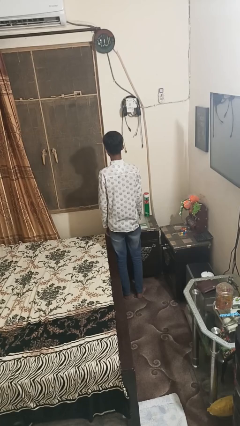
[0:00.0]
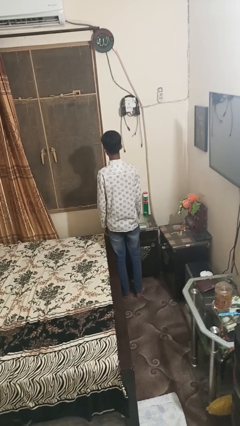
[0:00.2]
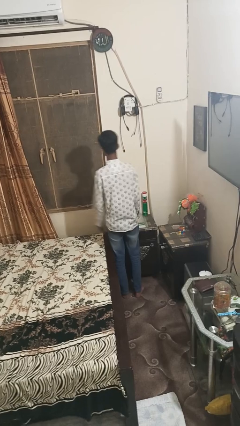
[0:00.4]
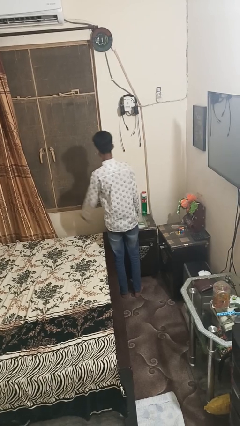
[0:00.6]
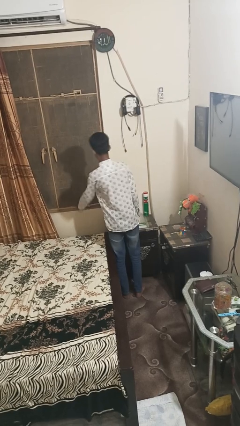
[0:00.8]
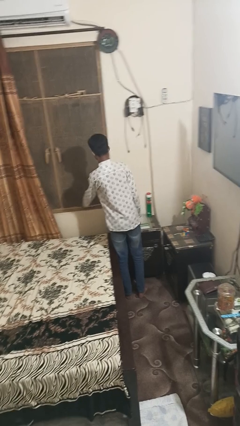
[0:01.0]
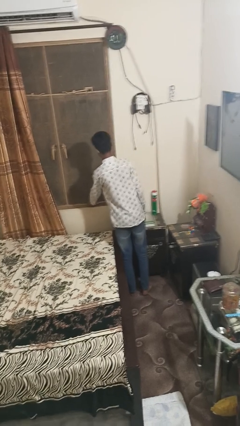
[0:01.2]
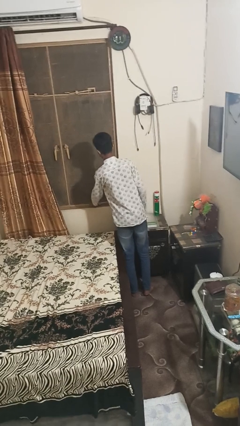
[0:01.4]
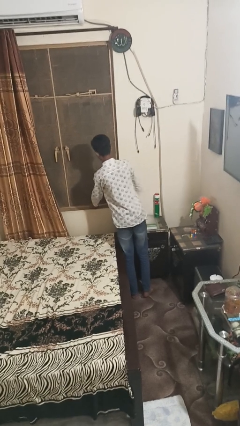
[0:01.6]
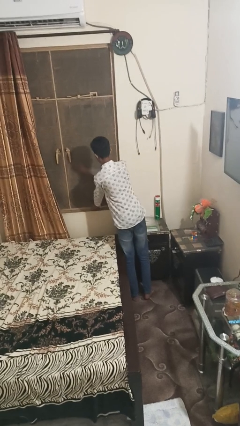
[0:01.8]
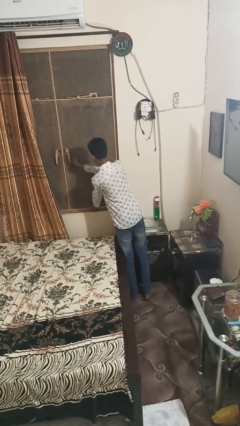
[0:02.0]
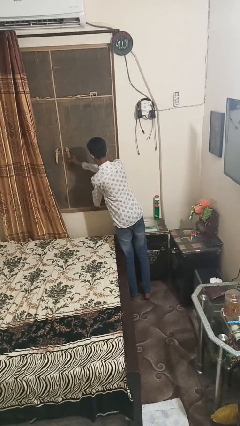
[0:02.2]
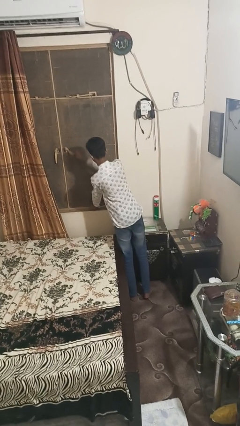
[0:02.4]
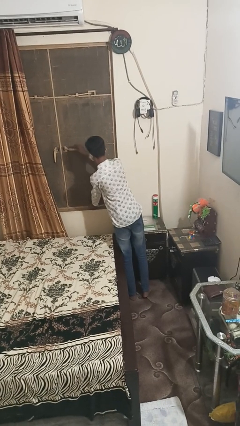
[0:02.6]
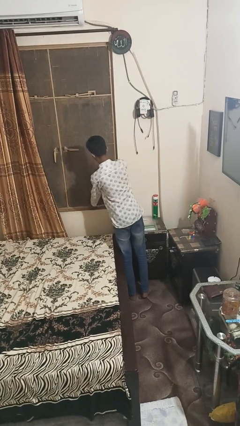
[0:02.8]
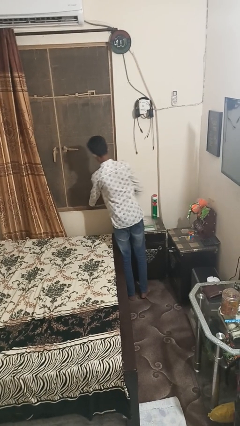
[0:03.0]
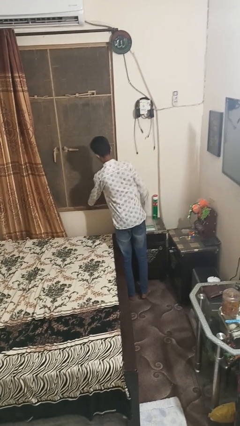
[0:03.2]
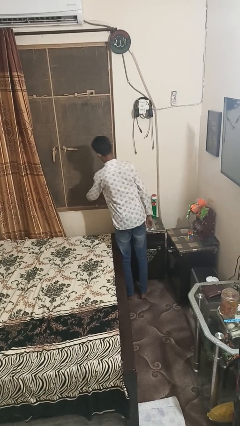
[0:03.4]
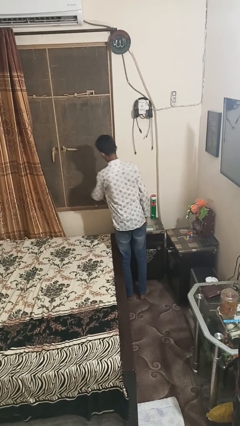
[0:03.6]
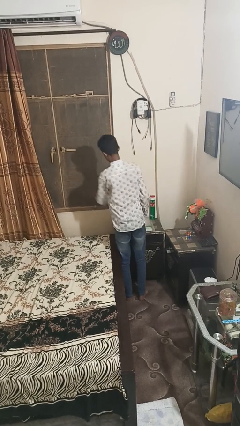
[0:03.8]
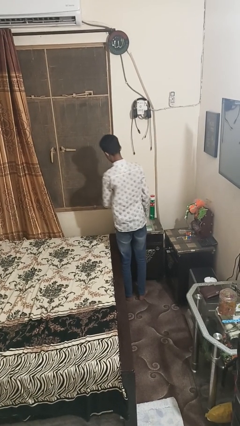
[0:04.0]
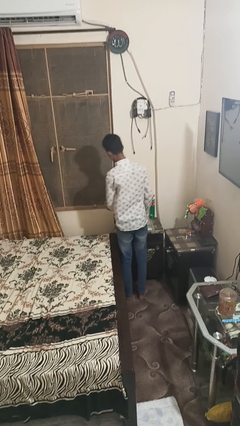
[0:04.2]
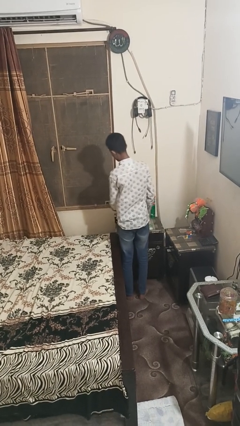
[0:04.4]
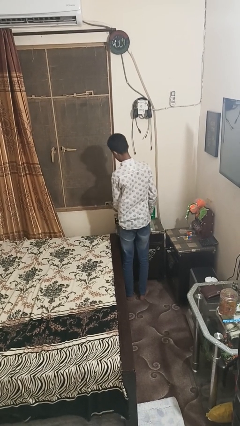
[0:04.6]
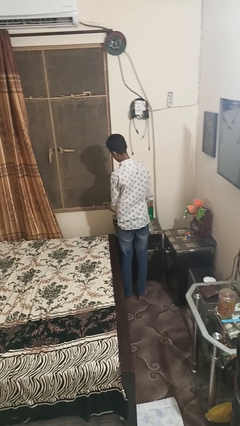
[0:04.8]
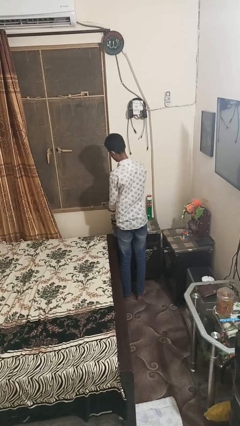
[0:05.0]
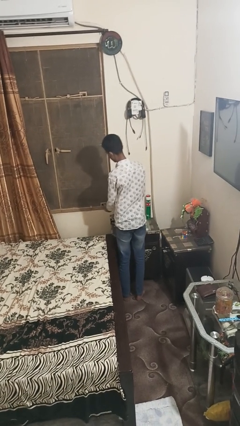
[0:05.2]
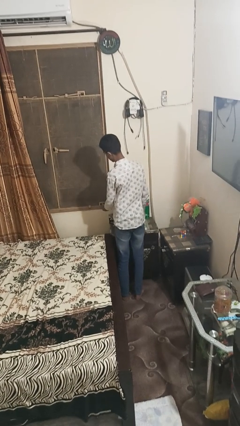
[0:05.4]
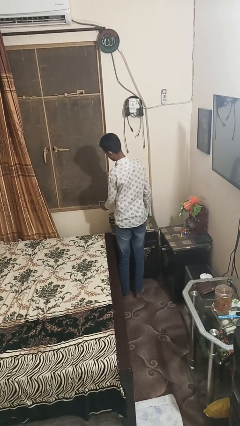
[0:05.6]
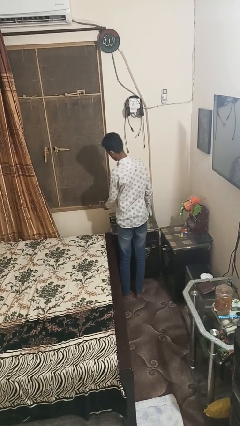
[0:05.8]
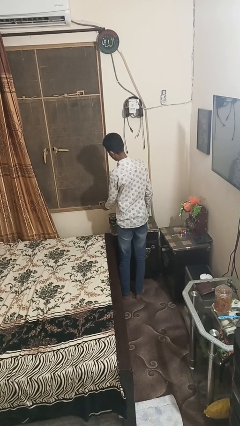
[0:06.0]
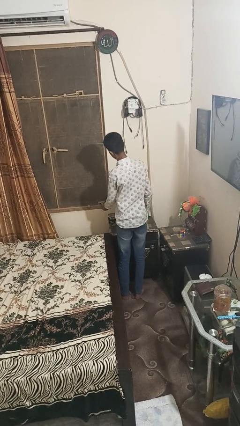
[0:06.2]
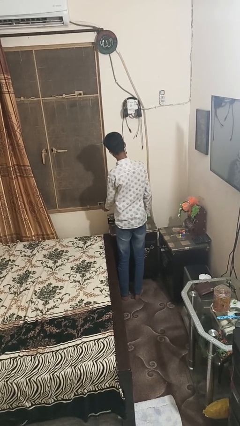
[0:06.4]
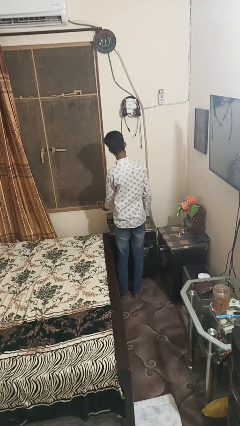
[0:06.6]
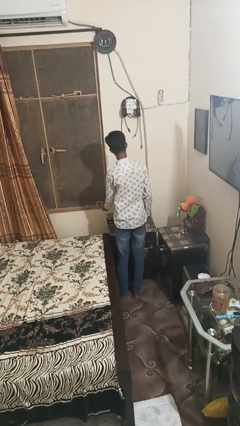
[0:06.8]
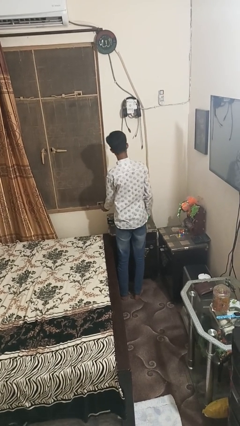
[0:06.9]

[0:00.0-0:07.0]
person opens home window

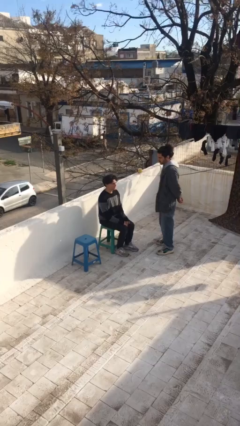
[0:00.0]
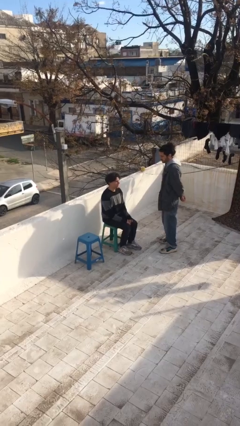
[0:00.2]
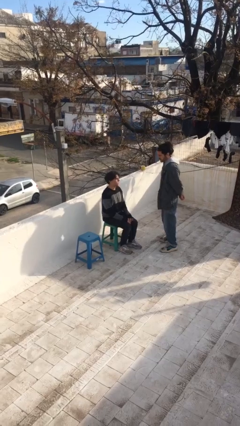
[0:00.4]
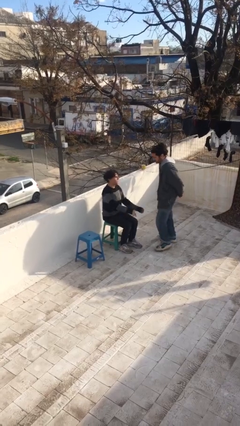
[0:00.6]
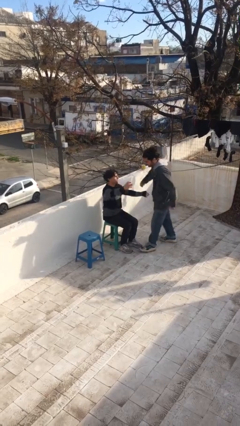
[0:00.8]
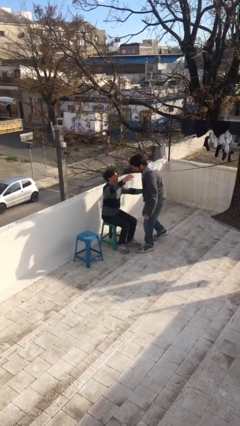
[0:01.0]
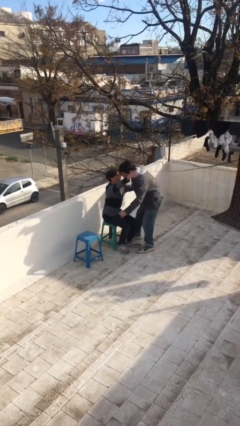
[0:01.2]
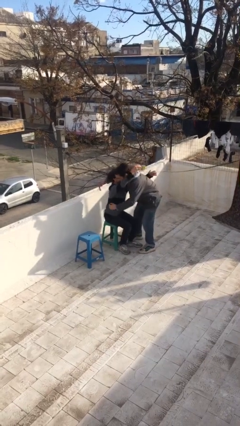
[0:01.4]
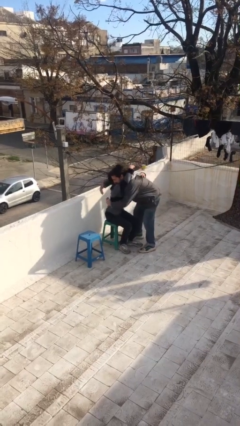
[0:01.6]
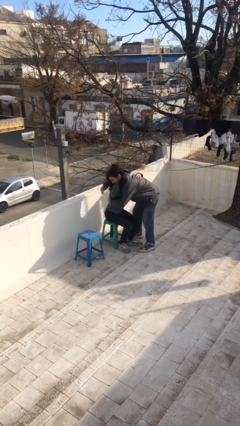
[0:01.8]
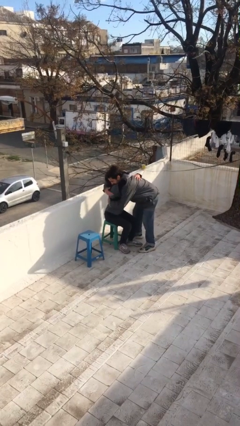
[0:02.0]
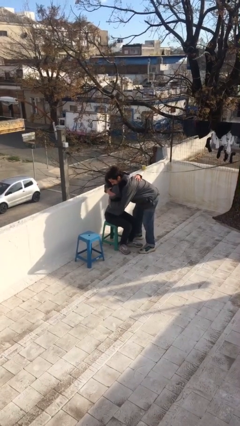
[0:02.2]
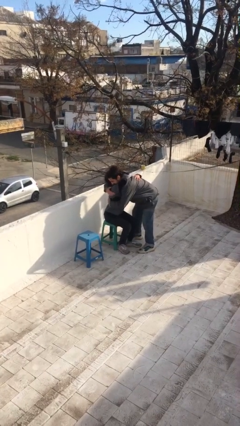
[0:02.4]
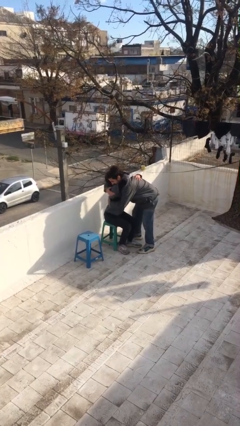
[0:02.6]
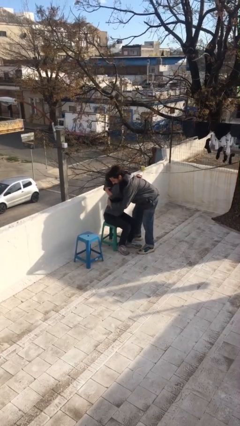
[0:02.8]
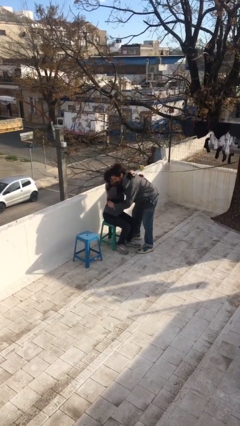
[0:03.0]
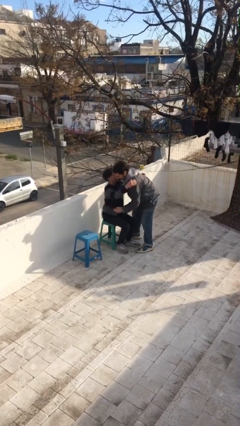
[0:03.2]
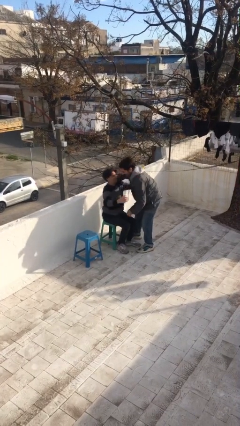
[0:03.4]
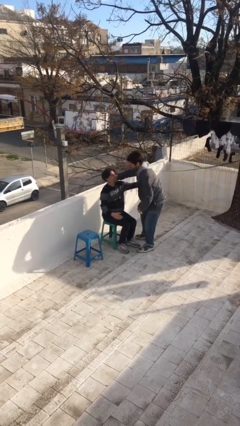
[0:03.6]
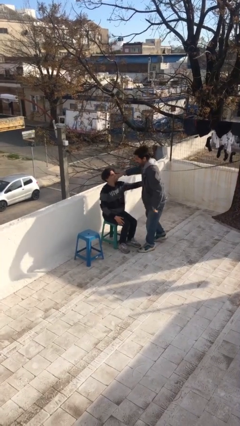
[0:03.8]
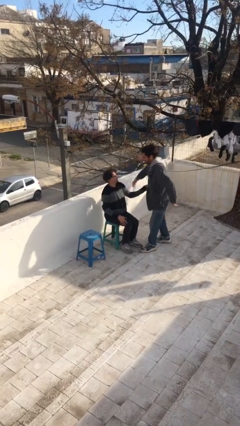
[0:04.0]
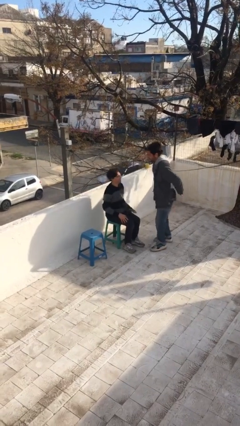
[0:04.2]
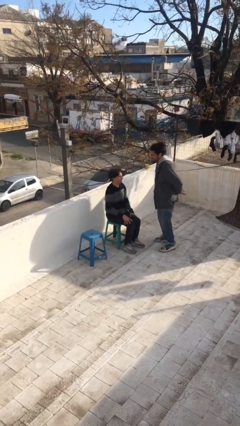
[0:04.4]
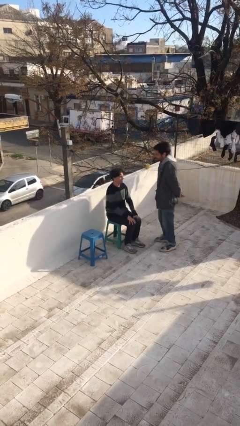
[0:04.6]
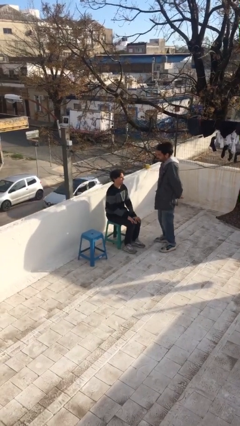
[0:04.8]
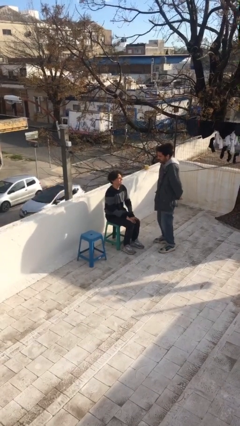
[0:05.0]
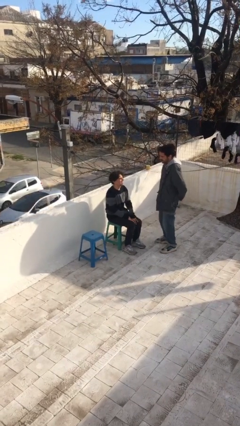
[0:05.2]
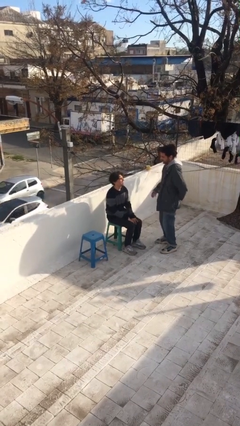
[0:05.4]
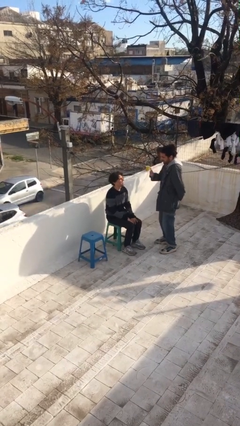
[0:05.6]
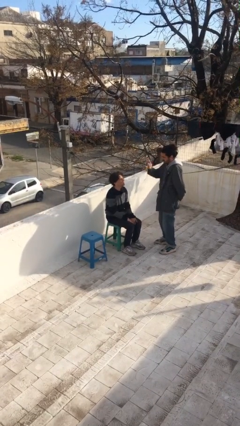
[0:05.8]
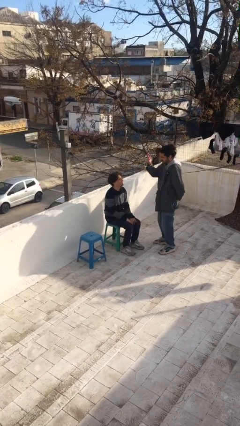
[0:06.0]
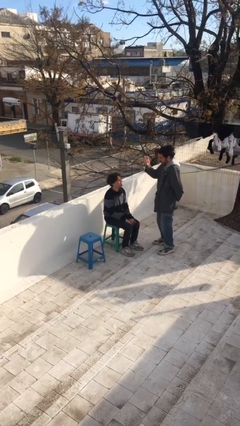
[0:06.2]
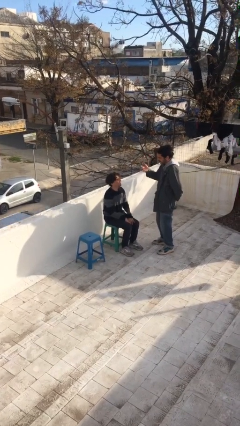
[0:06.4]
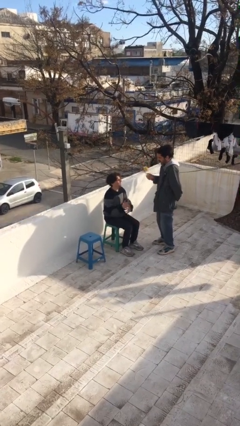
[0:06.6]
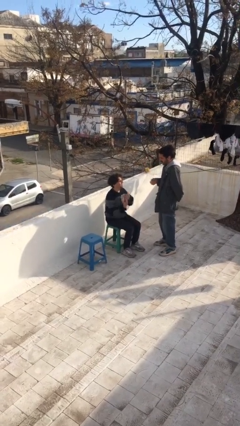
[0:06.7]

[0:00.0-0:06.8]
person embraces person

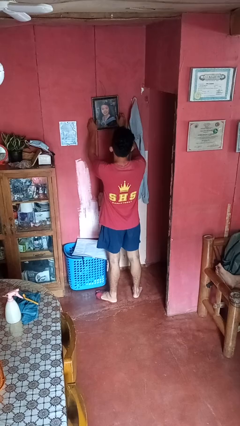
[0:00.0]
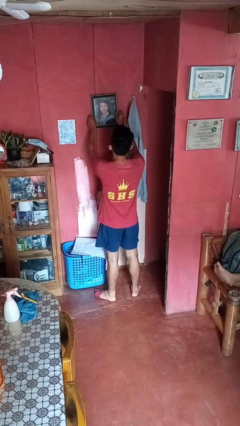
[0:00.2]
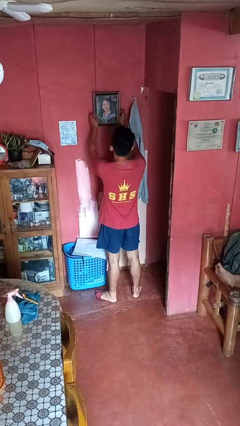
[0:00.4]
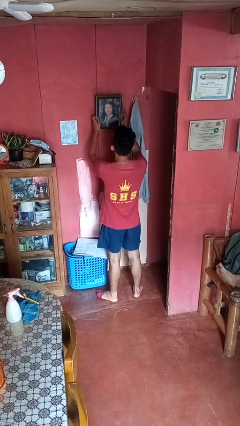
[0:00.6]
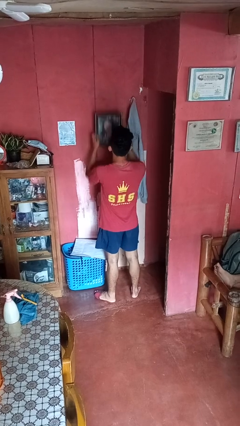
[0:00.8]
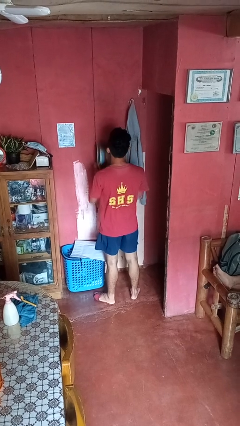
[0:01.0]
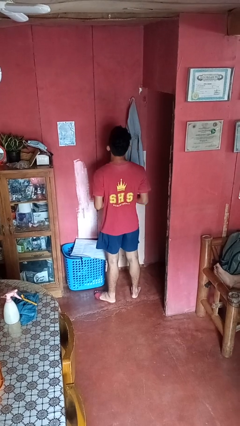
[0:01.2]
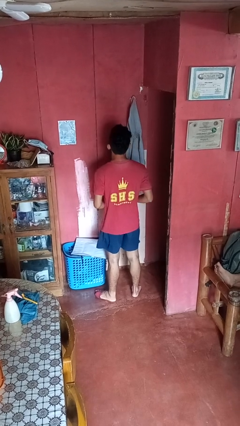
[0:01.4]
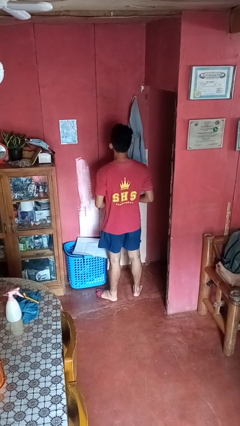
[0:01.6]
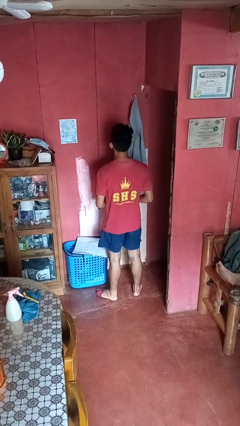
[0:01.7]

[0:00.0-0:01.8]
person takes down picture frame

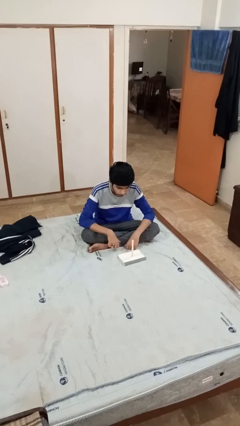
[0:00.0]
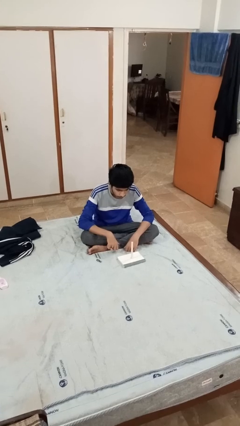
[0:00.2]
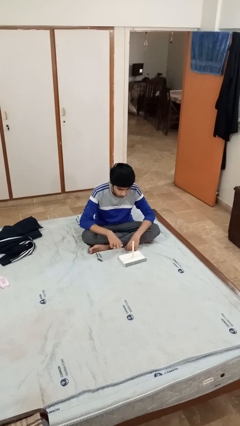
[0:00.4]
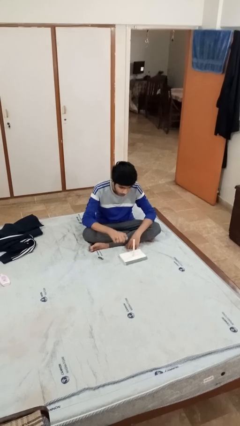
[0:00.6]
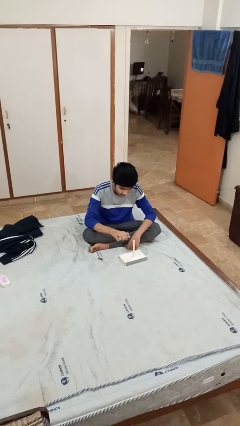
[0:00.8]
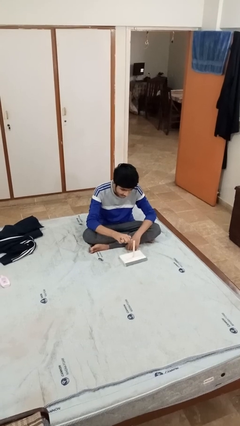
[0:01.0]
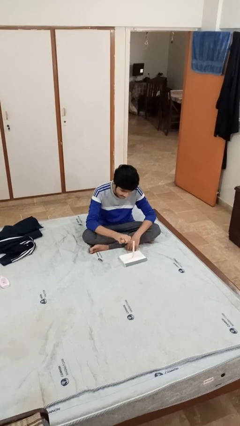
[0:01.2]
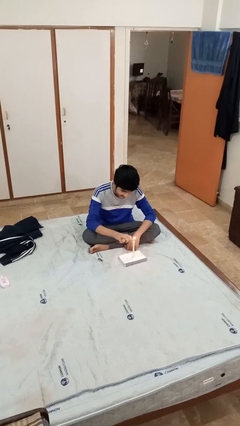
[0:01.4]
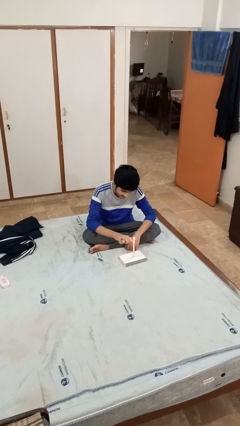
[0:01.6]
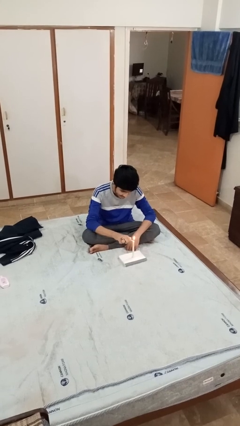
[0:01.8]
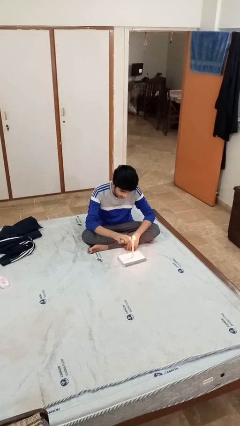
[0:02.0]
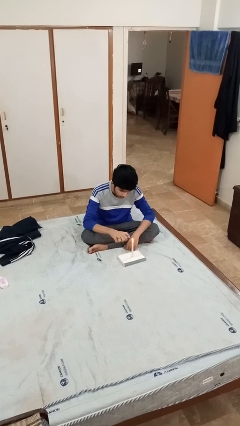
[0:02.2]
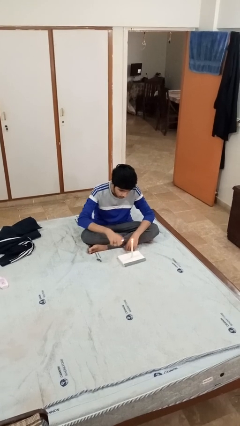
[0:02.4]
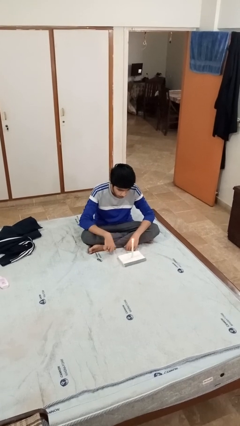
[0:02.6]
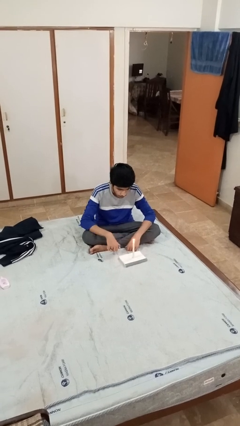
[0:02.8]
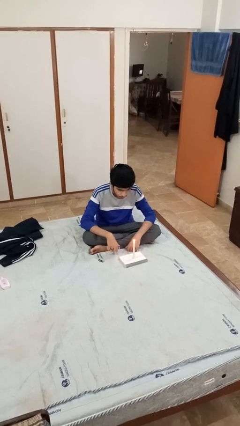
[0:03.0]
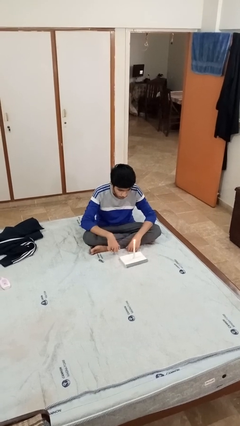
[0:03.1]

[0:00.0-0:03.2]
person lights candle
